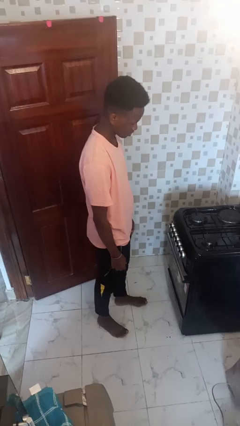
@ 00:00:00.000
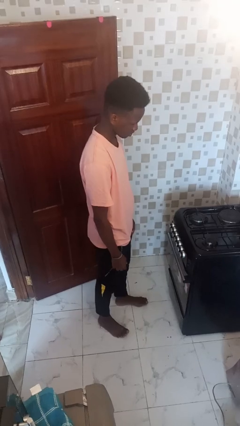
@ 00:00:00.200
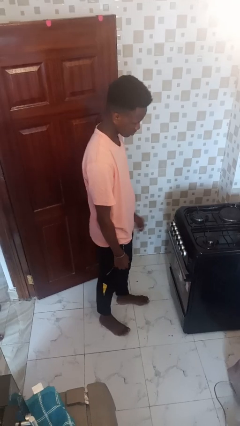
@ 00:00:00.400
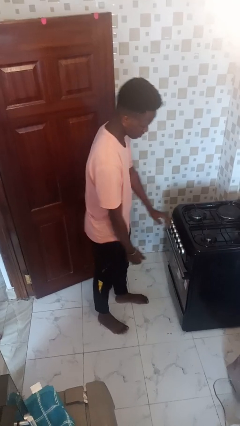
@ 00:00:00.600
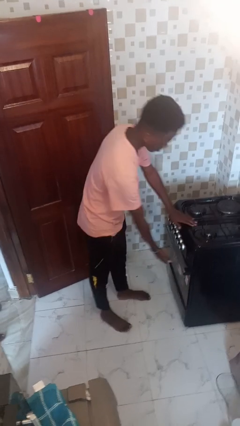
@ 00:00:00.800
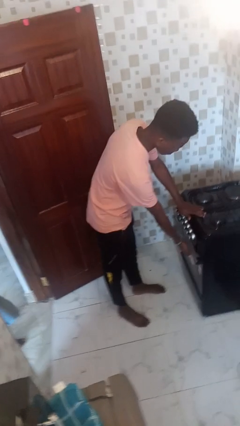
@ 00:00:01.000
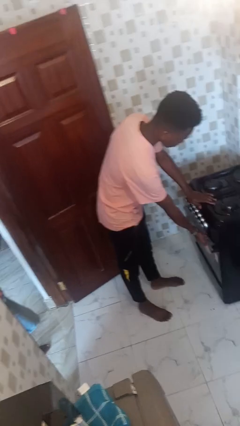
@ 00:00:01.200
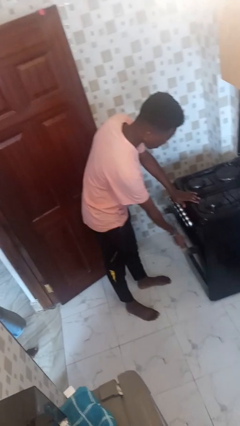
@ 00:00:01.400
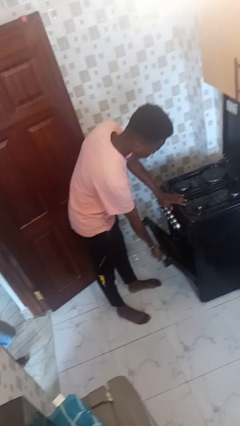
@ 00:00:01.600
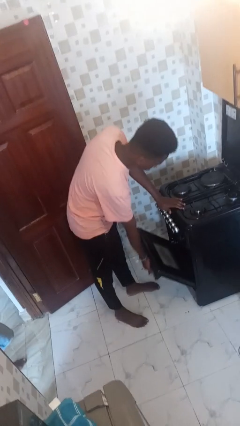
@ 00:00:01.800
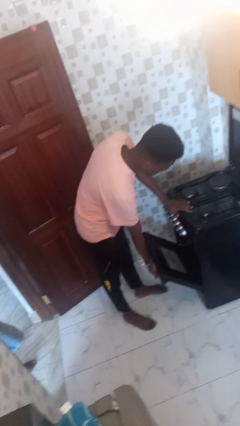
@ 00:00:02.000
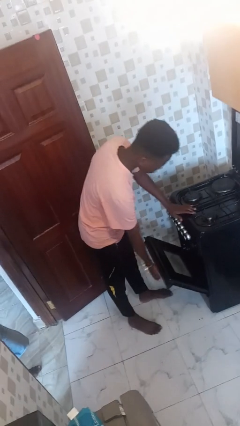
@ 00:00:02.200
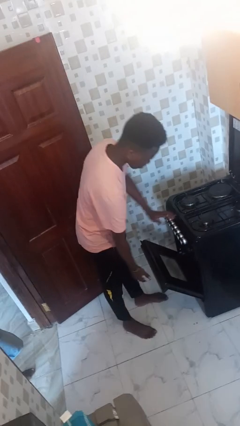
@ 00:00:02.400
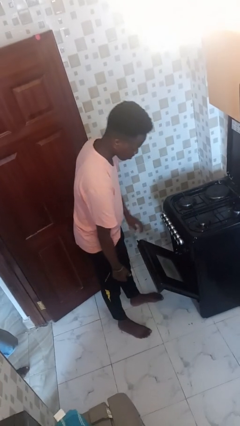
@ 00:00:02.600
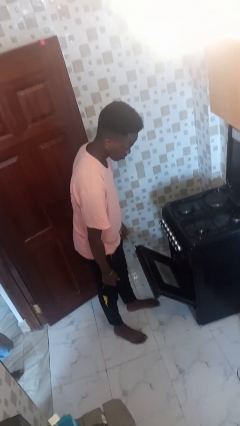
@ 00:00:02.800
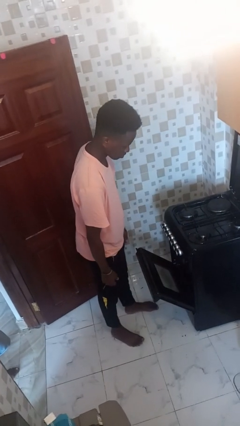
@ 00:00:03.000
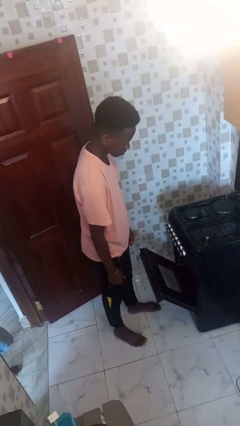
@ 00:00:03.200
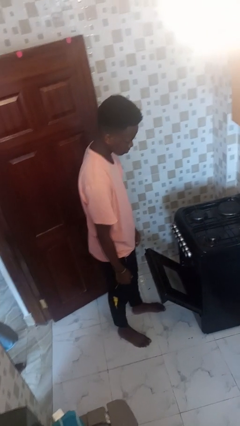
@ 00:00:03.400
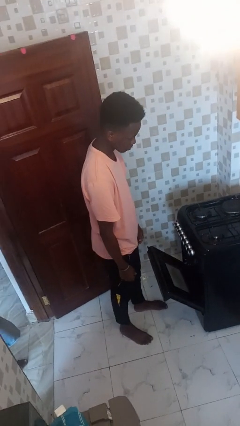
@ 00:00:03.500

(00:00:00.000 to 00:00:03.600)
person opens oven door

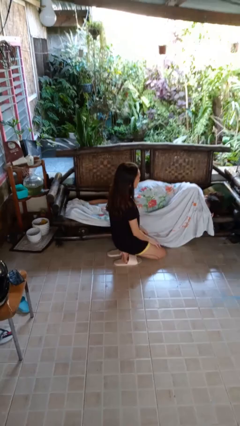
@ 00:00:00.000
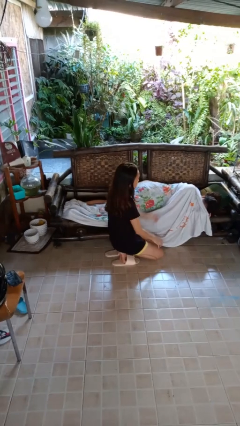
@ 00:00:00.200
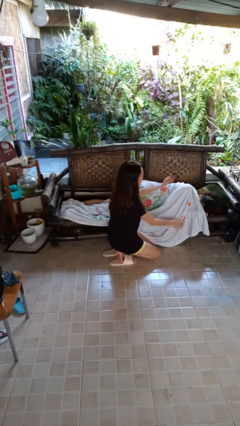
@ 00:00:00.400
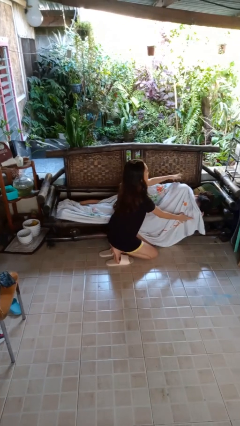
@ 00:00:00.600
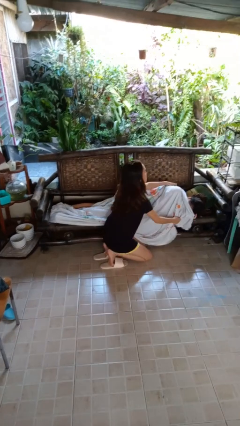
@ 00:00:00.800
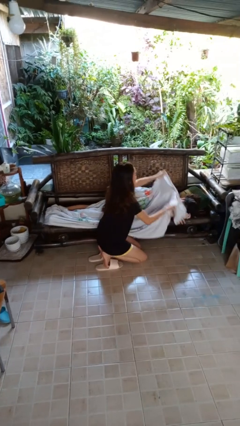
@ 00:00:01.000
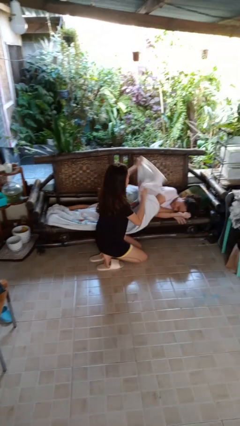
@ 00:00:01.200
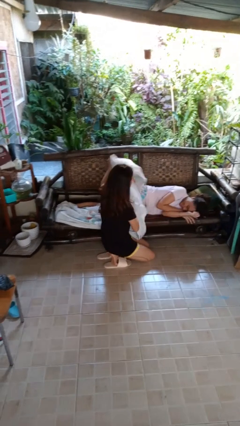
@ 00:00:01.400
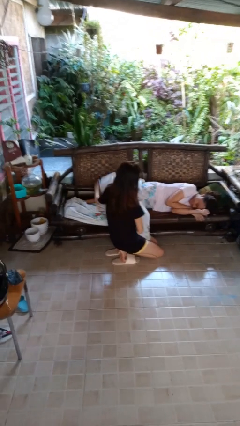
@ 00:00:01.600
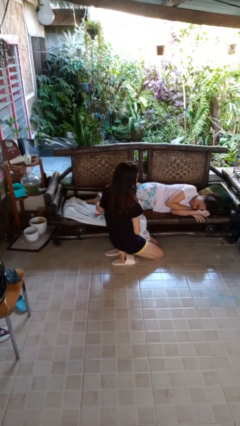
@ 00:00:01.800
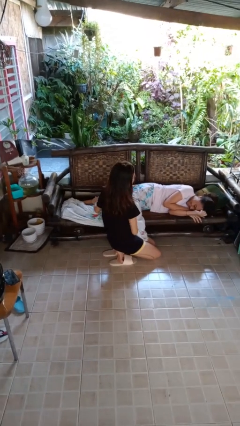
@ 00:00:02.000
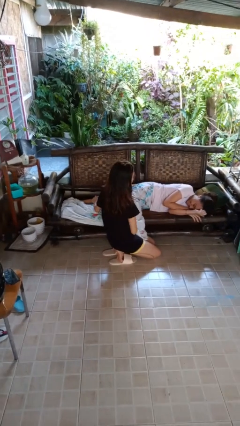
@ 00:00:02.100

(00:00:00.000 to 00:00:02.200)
person uncovers friend with blanket

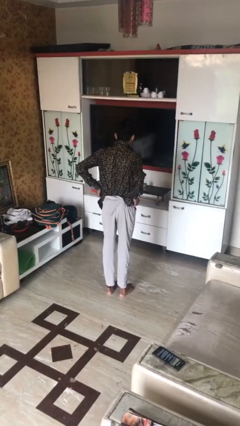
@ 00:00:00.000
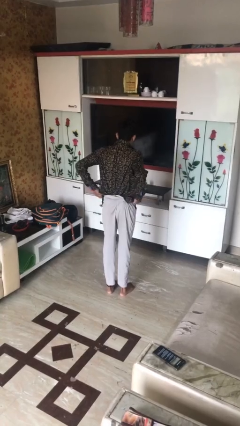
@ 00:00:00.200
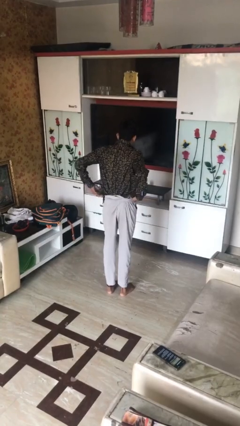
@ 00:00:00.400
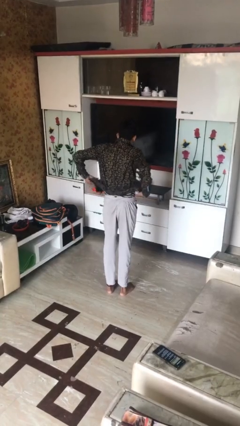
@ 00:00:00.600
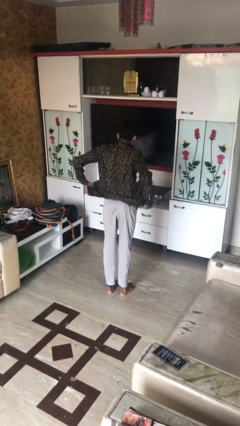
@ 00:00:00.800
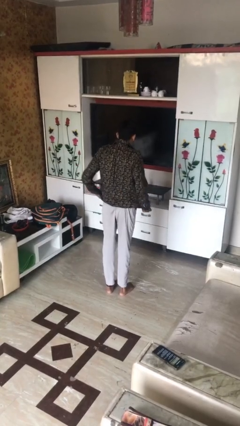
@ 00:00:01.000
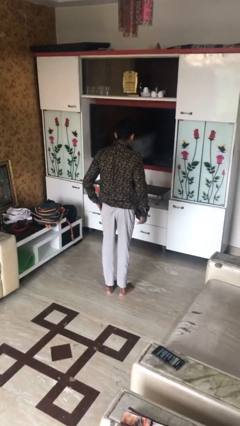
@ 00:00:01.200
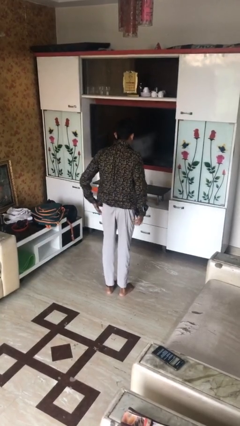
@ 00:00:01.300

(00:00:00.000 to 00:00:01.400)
person untucks shirt

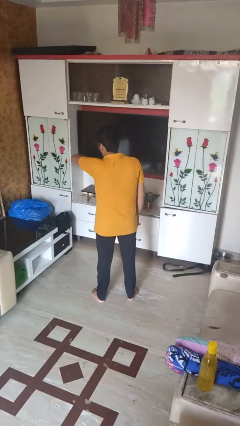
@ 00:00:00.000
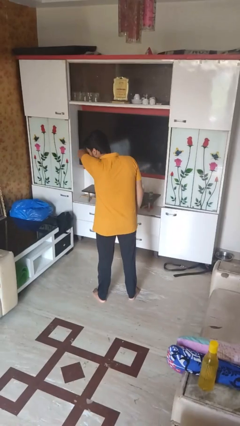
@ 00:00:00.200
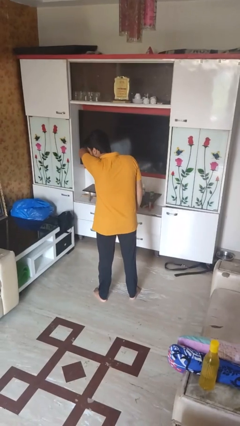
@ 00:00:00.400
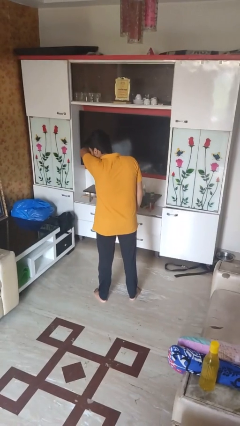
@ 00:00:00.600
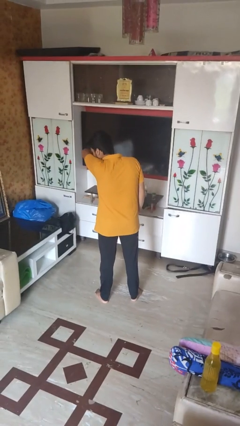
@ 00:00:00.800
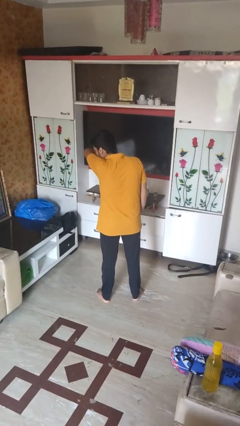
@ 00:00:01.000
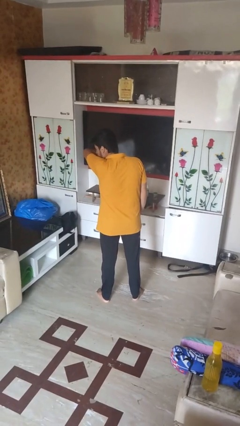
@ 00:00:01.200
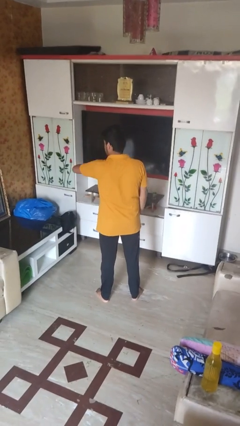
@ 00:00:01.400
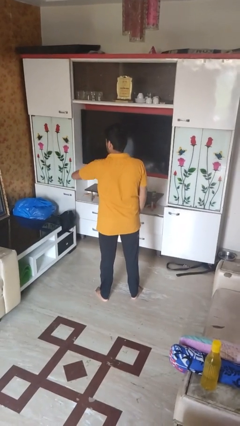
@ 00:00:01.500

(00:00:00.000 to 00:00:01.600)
person sneezes into arm

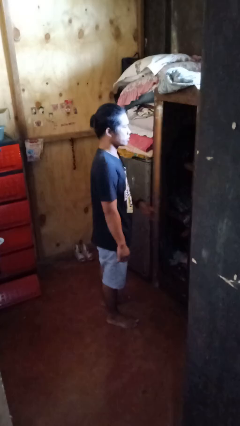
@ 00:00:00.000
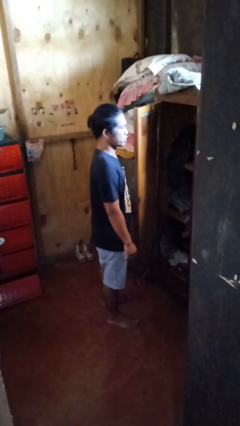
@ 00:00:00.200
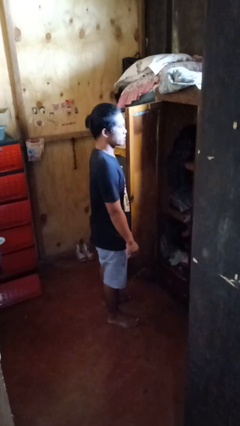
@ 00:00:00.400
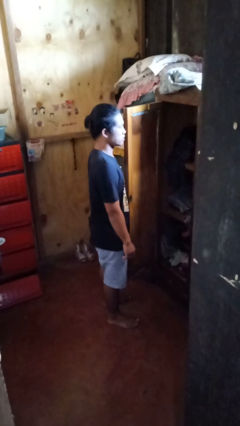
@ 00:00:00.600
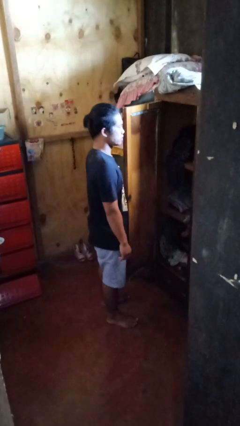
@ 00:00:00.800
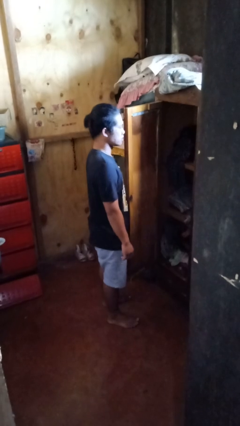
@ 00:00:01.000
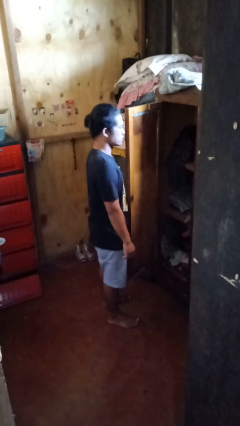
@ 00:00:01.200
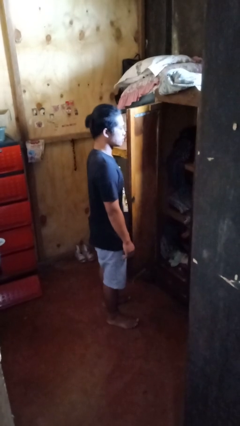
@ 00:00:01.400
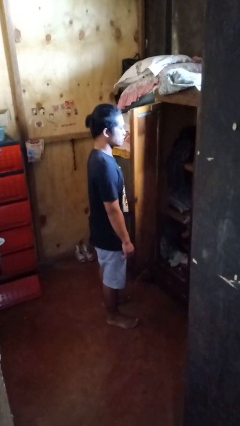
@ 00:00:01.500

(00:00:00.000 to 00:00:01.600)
person opens closet door

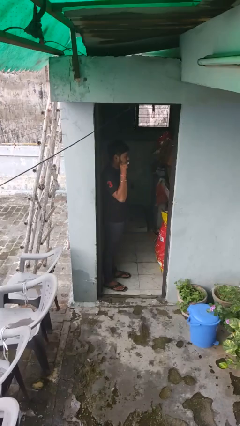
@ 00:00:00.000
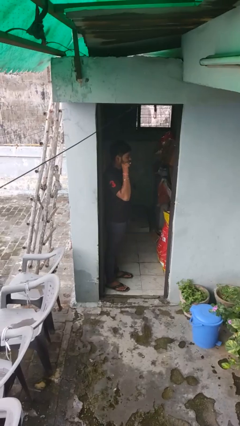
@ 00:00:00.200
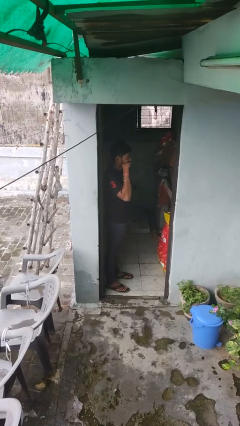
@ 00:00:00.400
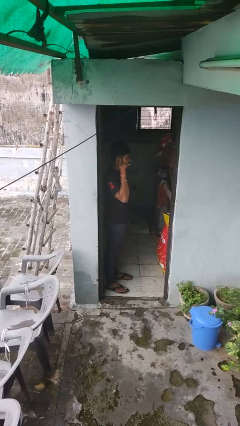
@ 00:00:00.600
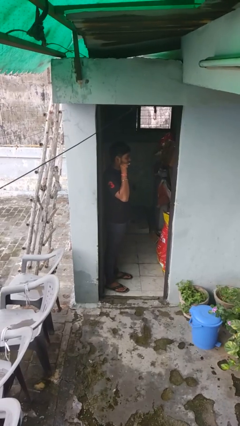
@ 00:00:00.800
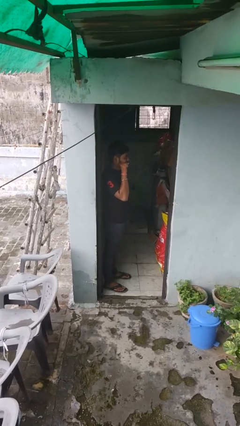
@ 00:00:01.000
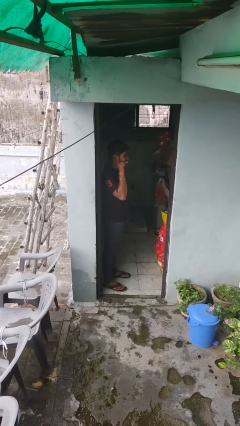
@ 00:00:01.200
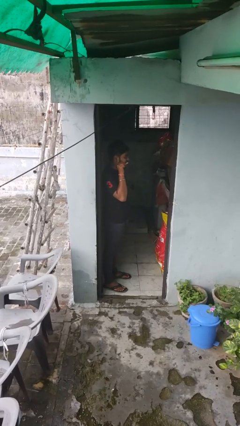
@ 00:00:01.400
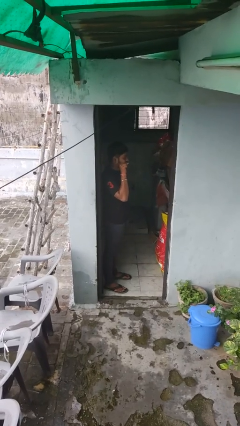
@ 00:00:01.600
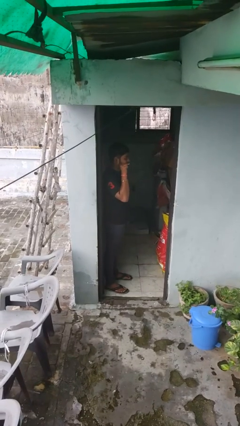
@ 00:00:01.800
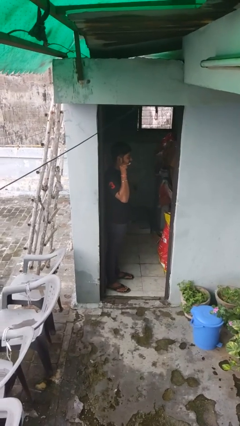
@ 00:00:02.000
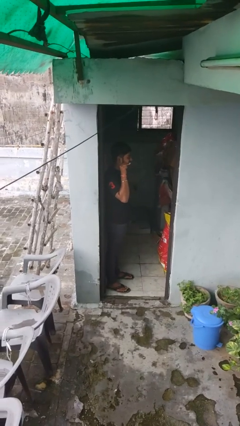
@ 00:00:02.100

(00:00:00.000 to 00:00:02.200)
person brushes teeth

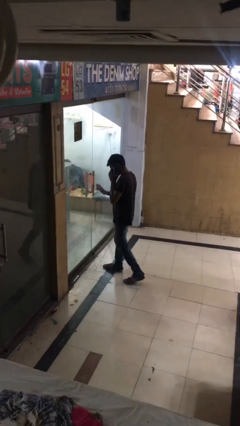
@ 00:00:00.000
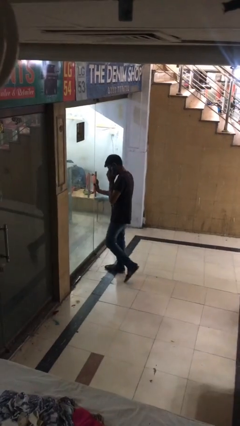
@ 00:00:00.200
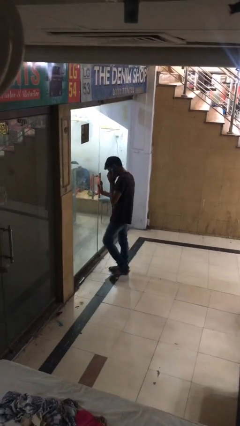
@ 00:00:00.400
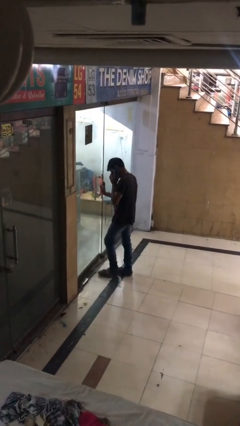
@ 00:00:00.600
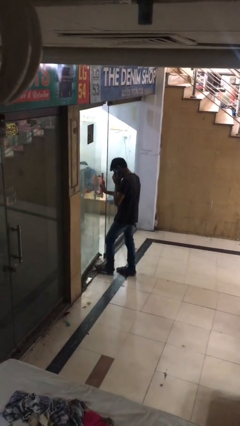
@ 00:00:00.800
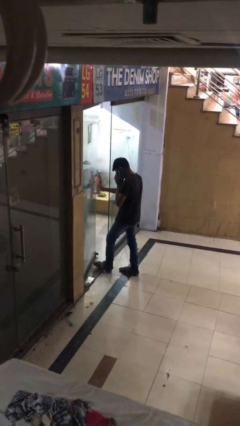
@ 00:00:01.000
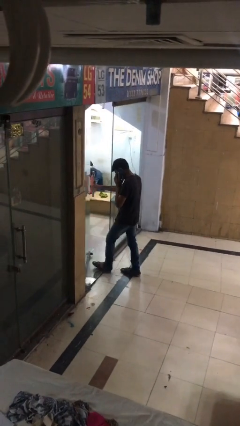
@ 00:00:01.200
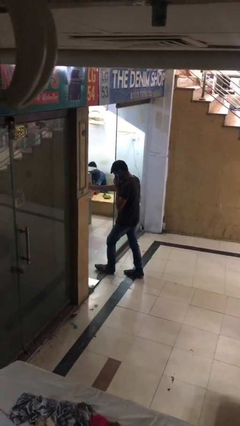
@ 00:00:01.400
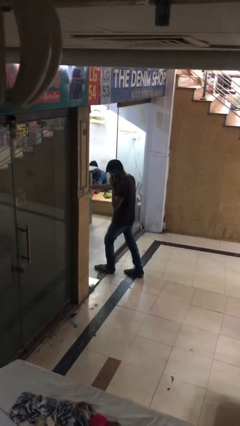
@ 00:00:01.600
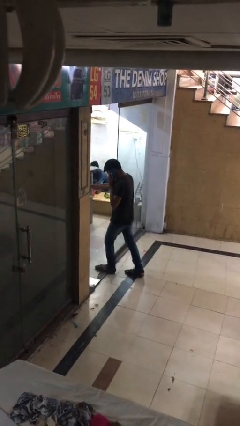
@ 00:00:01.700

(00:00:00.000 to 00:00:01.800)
person opens facility door

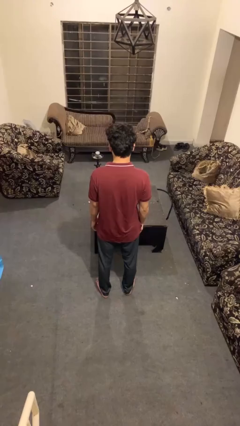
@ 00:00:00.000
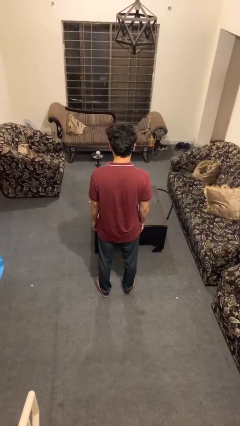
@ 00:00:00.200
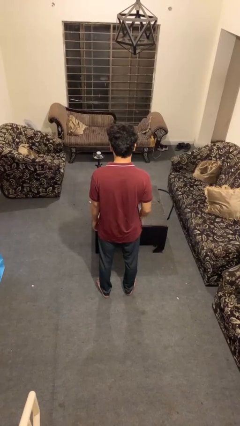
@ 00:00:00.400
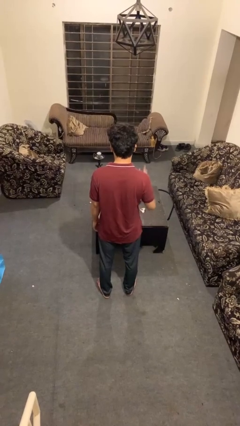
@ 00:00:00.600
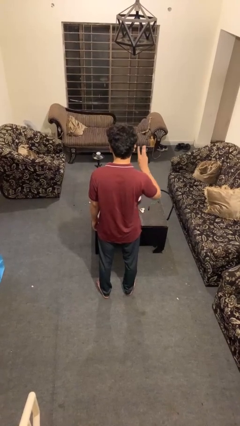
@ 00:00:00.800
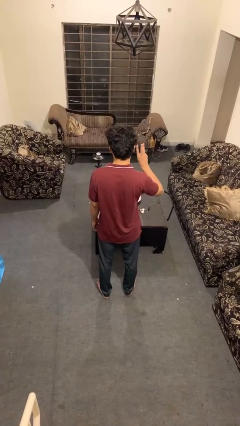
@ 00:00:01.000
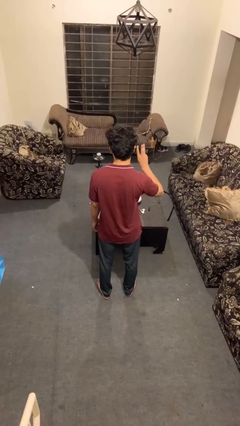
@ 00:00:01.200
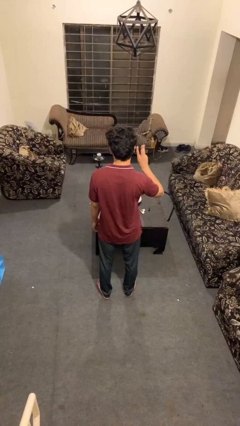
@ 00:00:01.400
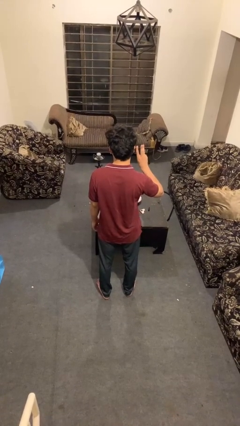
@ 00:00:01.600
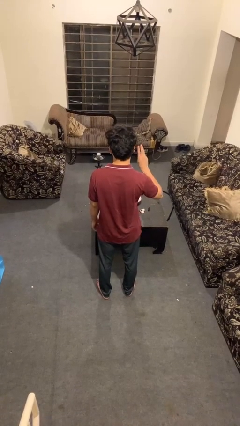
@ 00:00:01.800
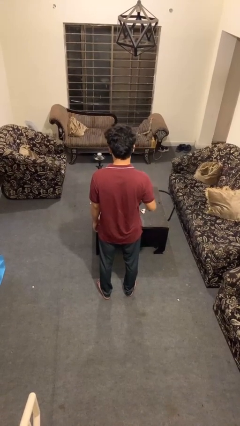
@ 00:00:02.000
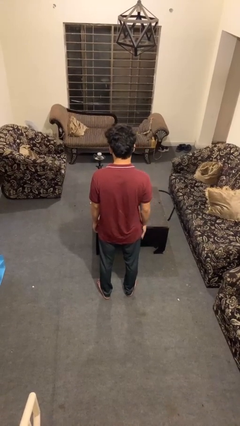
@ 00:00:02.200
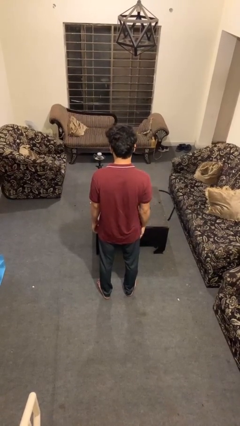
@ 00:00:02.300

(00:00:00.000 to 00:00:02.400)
person gestures number three
